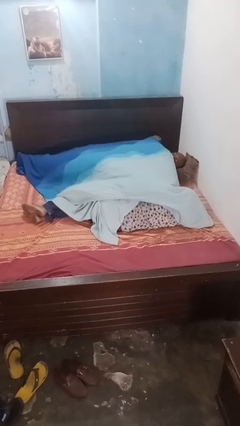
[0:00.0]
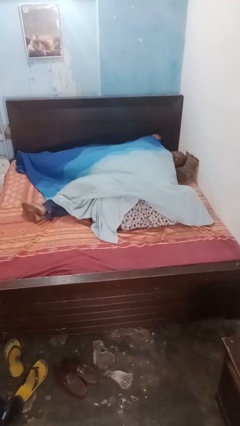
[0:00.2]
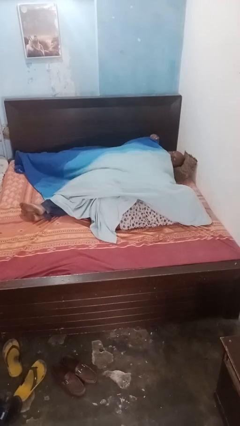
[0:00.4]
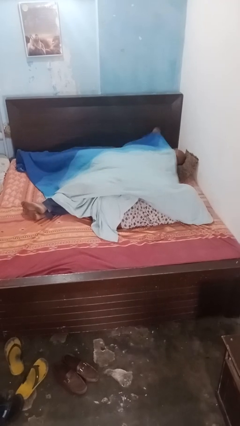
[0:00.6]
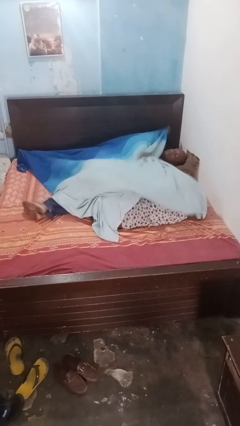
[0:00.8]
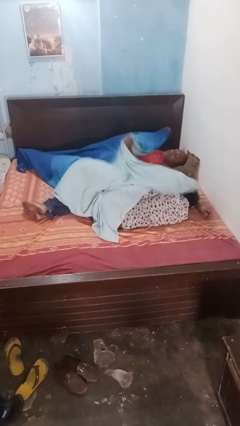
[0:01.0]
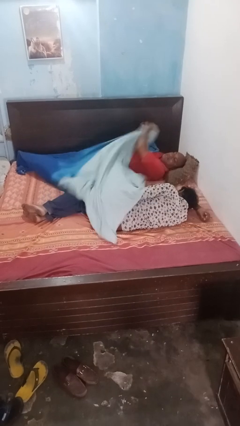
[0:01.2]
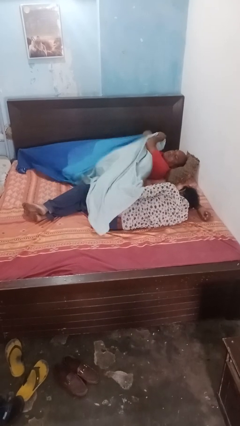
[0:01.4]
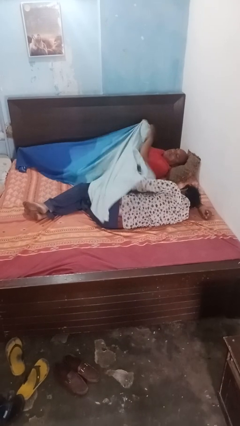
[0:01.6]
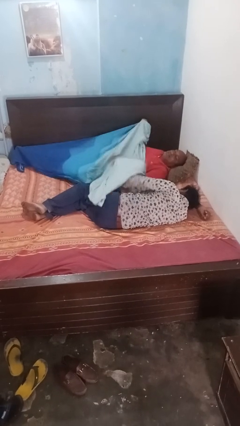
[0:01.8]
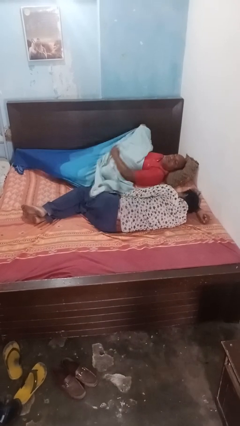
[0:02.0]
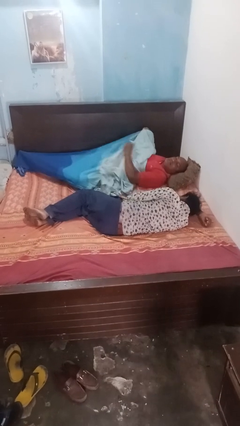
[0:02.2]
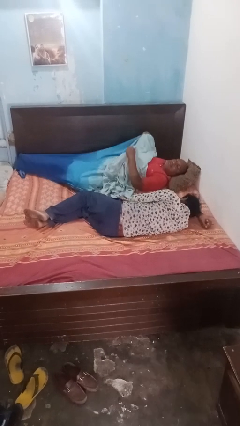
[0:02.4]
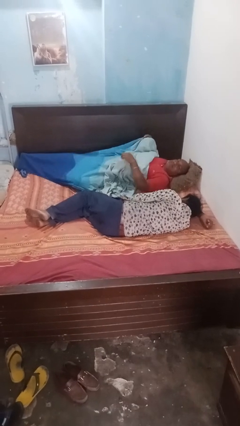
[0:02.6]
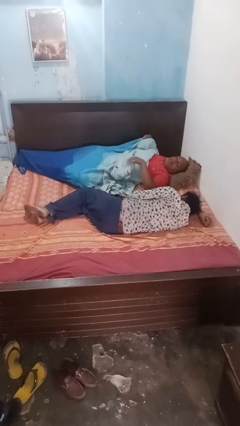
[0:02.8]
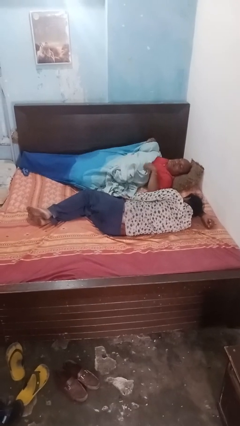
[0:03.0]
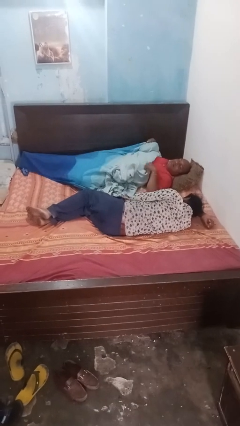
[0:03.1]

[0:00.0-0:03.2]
person uncovers friend with blanket

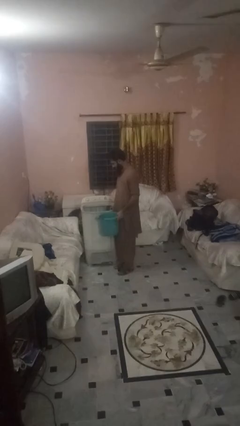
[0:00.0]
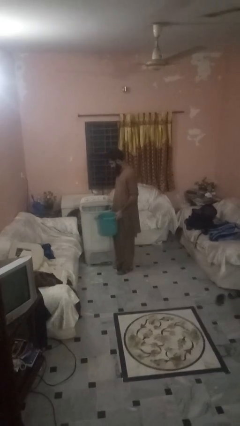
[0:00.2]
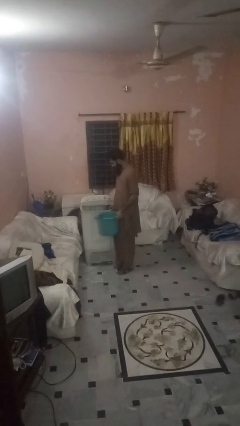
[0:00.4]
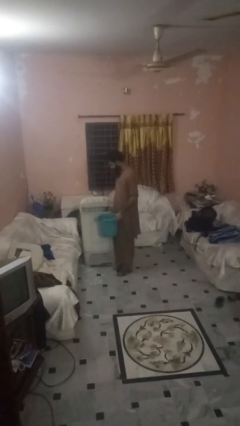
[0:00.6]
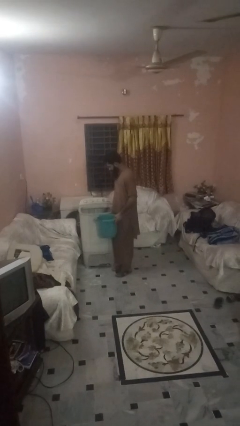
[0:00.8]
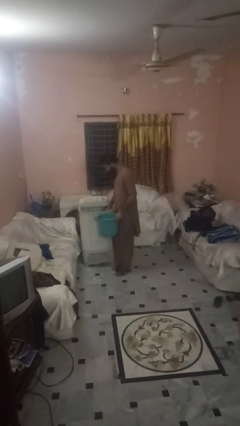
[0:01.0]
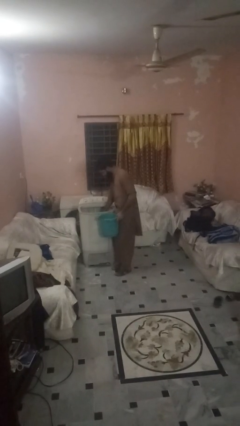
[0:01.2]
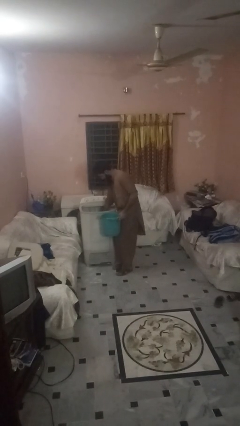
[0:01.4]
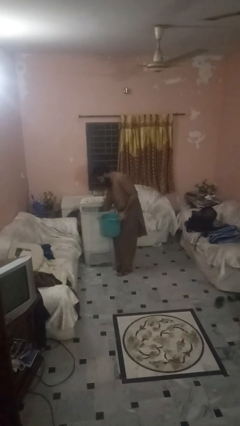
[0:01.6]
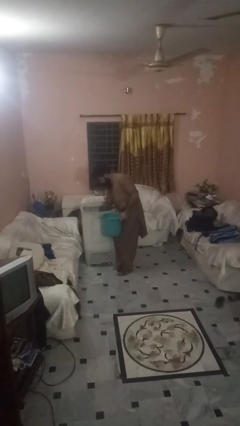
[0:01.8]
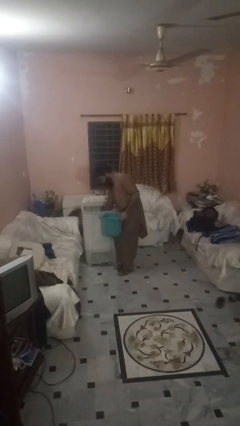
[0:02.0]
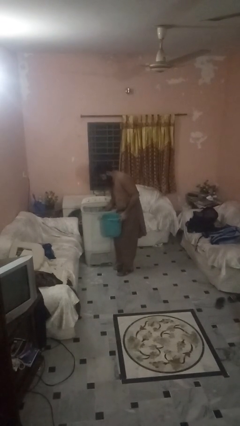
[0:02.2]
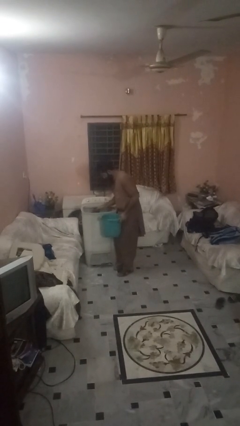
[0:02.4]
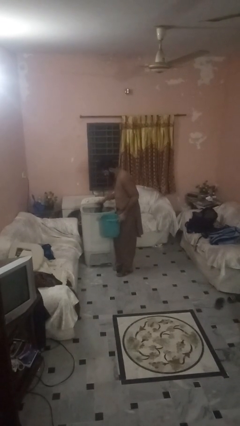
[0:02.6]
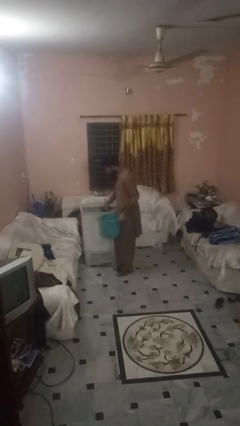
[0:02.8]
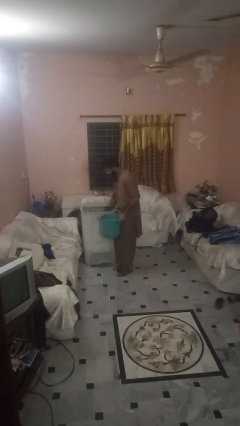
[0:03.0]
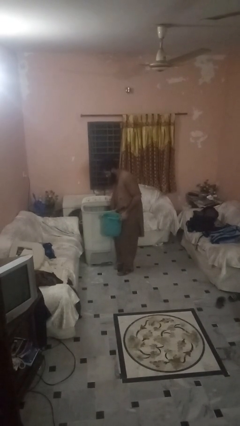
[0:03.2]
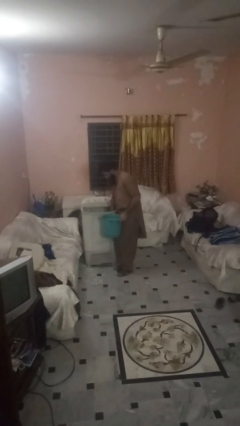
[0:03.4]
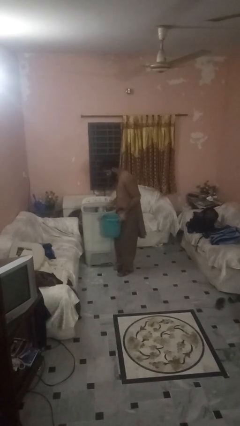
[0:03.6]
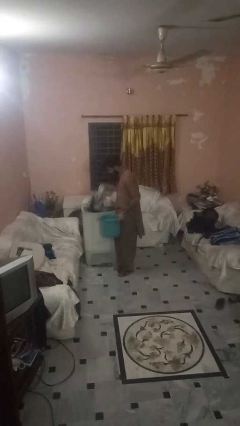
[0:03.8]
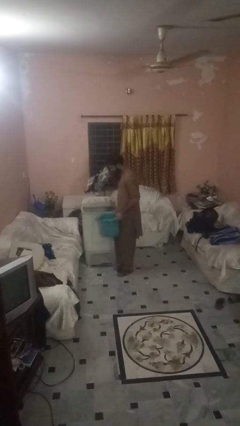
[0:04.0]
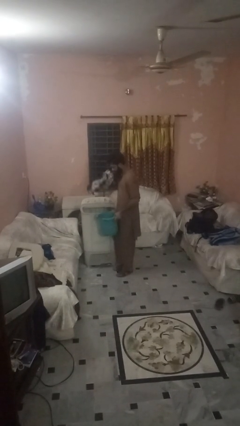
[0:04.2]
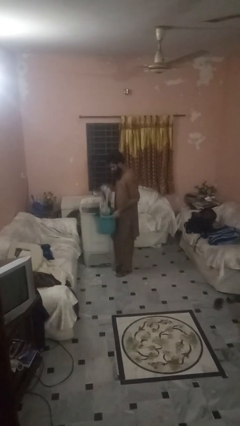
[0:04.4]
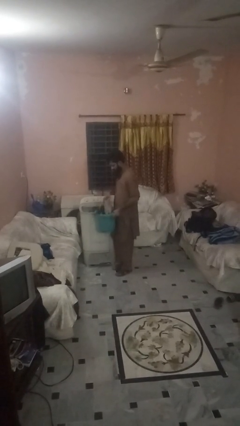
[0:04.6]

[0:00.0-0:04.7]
person unloads clotheswasher

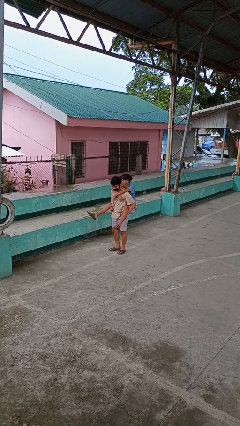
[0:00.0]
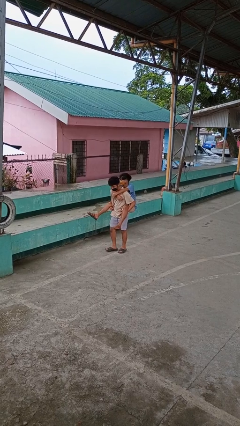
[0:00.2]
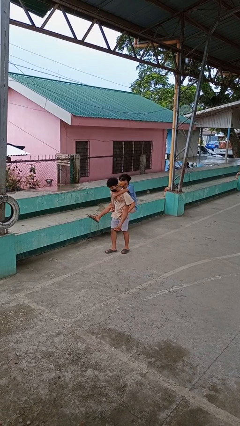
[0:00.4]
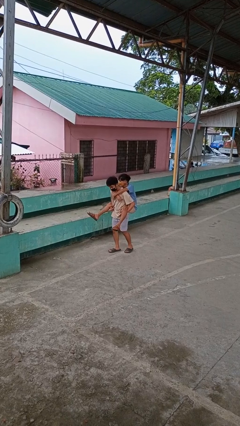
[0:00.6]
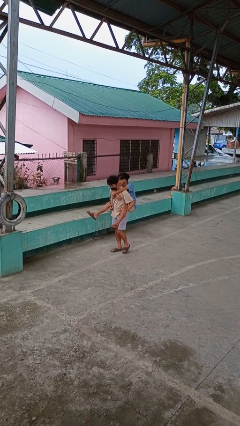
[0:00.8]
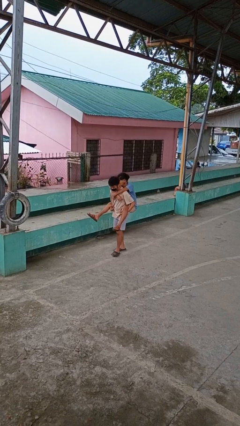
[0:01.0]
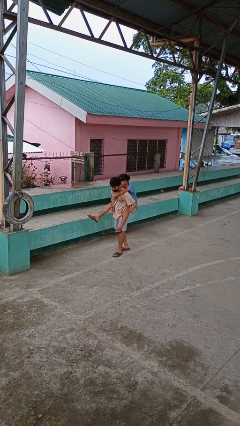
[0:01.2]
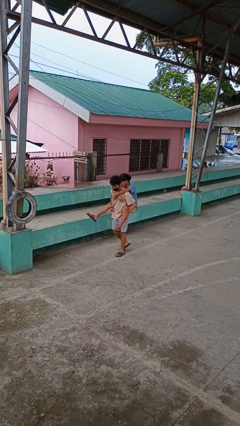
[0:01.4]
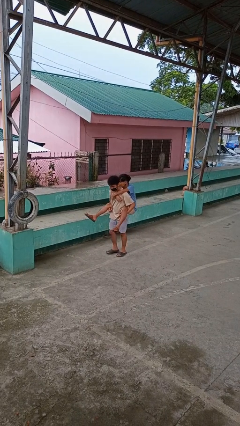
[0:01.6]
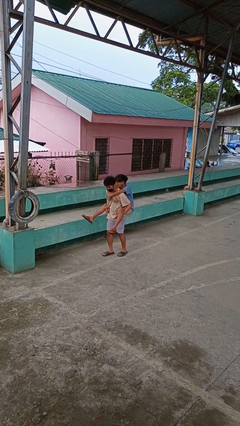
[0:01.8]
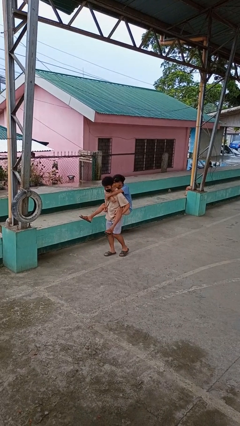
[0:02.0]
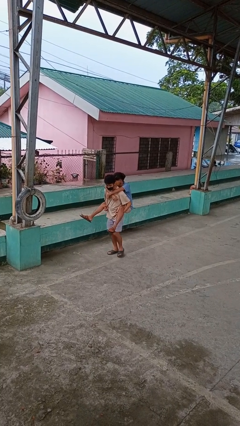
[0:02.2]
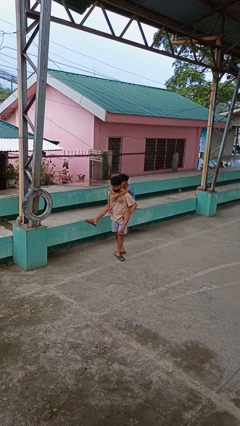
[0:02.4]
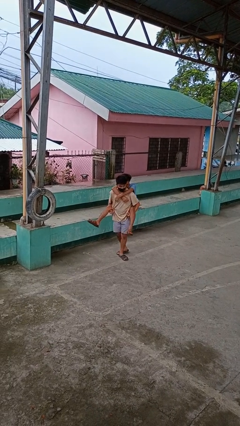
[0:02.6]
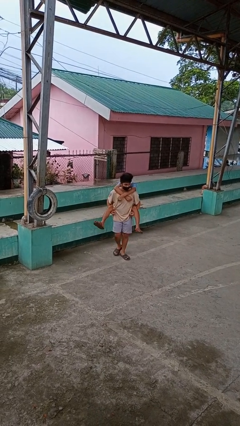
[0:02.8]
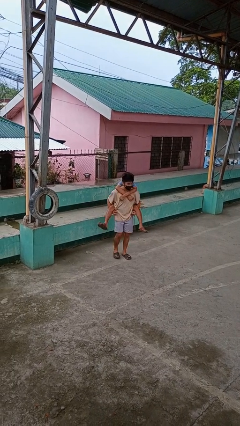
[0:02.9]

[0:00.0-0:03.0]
person carries person on back

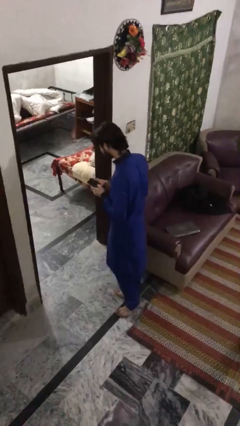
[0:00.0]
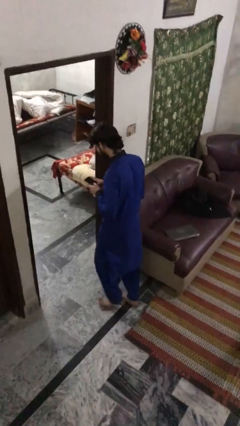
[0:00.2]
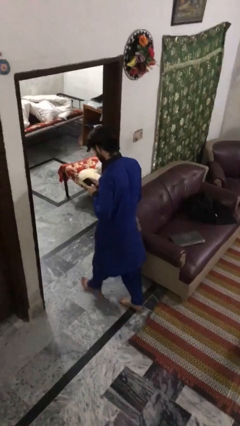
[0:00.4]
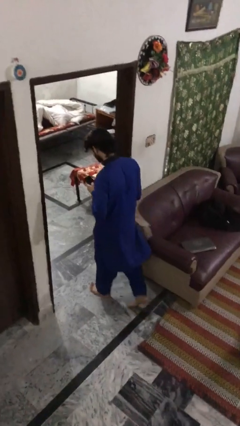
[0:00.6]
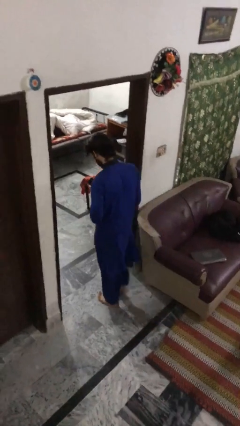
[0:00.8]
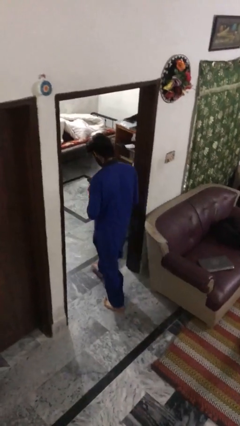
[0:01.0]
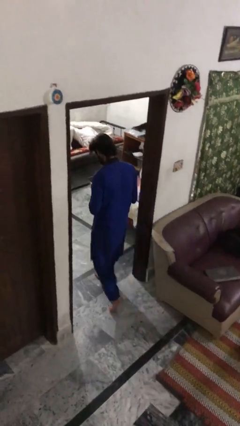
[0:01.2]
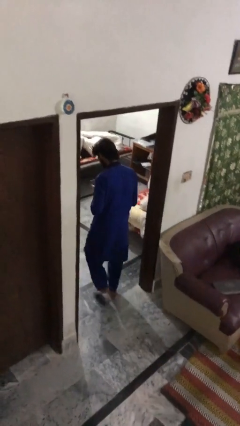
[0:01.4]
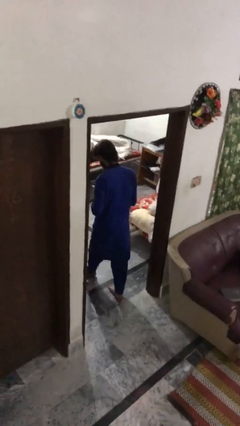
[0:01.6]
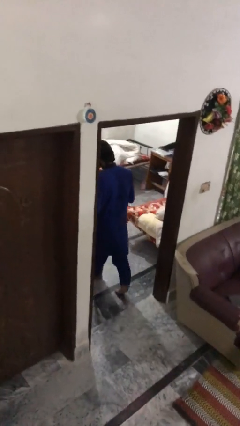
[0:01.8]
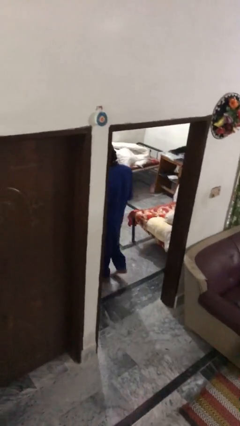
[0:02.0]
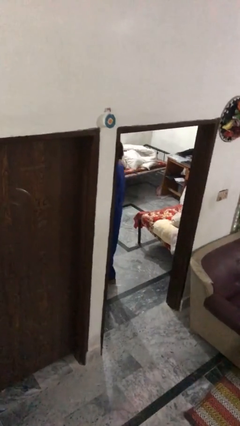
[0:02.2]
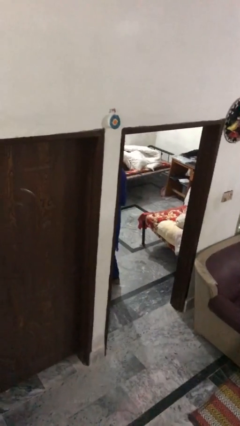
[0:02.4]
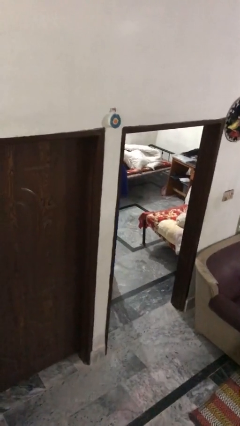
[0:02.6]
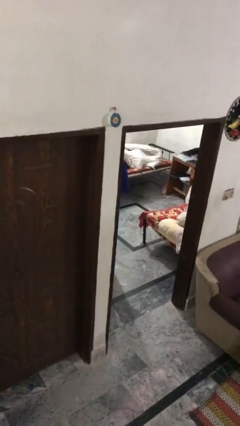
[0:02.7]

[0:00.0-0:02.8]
person exits scene through structure

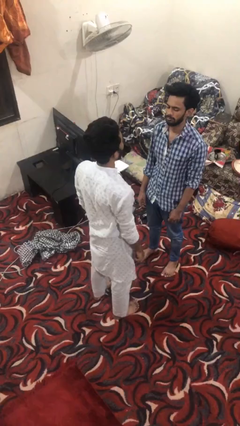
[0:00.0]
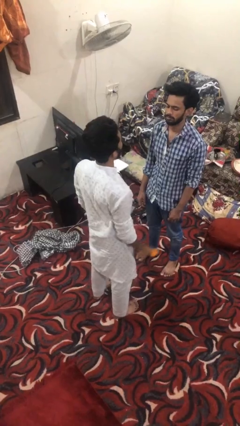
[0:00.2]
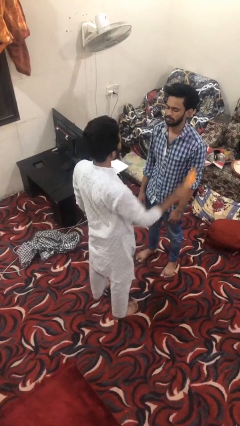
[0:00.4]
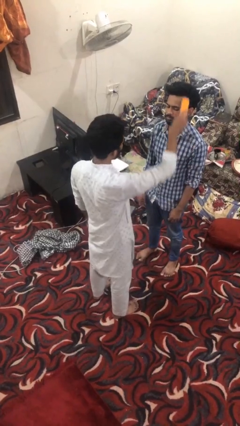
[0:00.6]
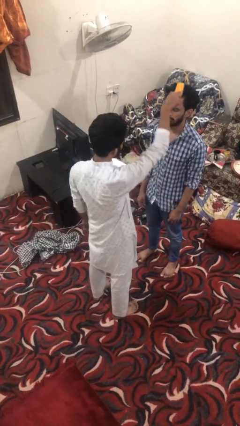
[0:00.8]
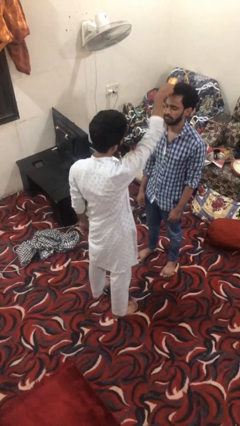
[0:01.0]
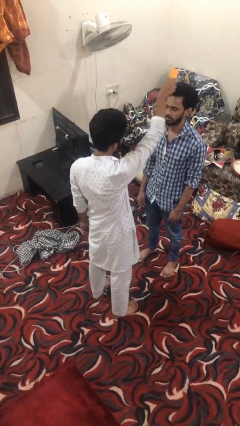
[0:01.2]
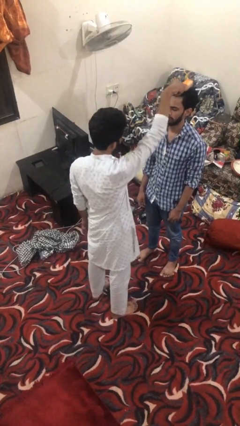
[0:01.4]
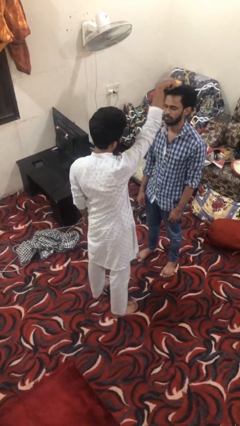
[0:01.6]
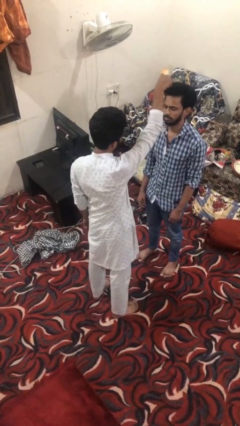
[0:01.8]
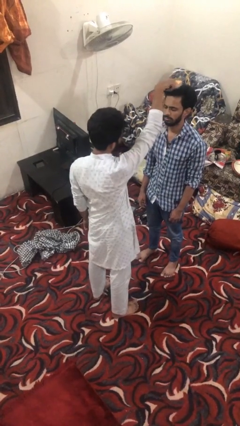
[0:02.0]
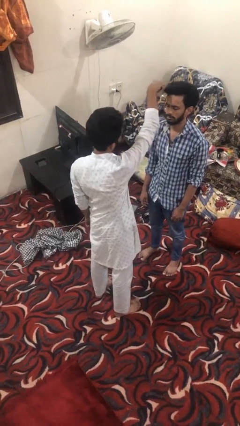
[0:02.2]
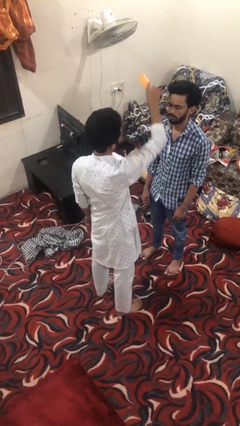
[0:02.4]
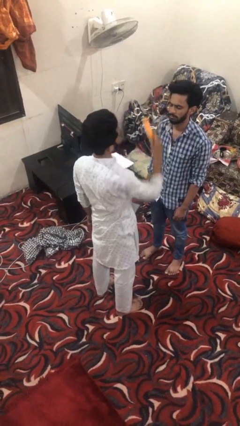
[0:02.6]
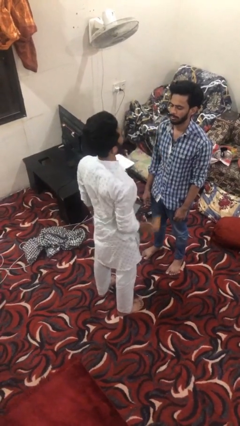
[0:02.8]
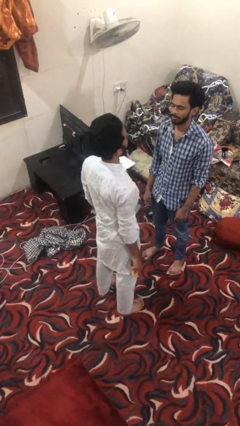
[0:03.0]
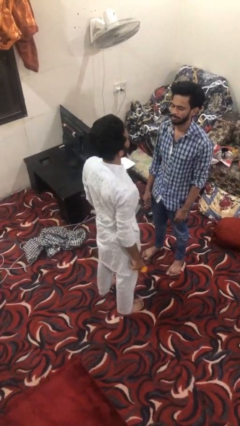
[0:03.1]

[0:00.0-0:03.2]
person brushes hair of person

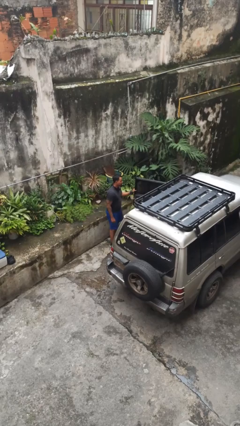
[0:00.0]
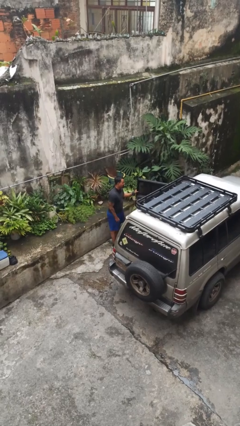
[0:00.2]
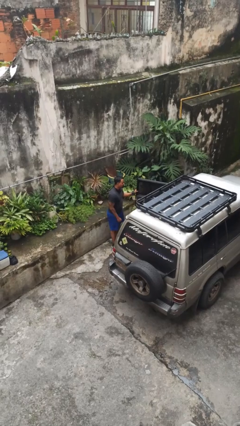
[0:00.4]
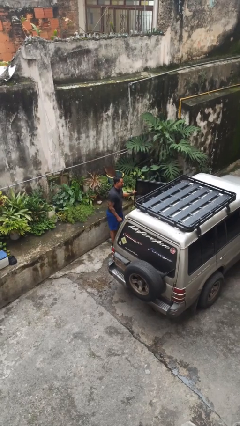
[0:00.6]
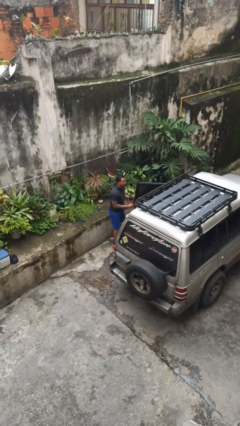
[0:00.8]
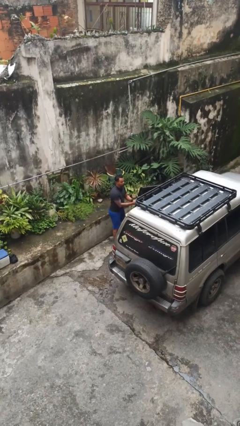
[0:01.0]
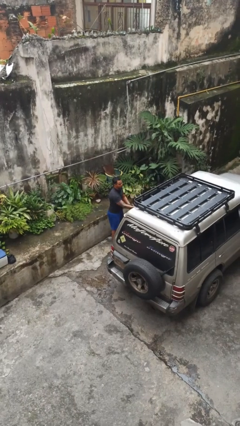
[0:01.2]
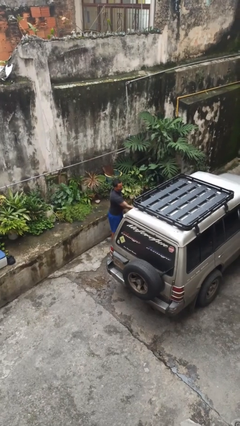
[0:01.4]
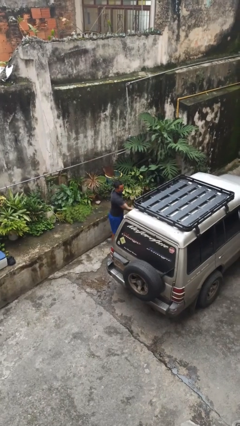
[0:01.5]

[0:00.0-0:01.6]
person closes car door
